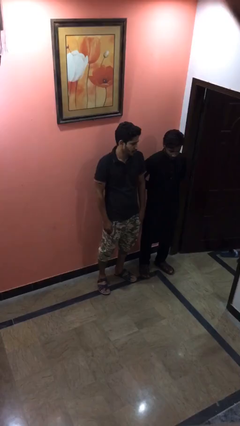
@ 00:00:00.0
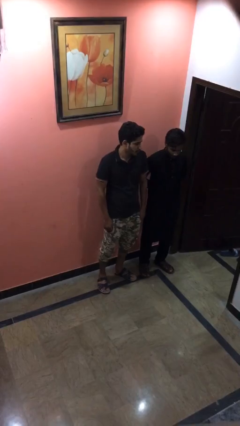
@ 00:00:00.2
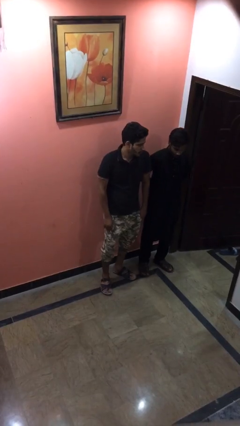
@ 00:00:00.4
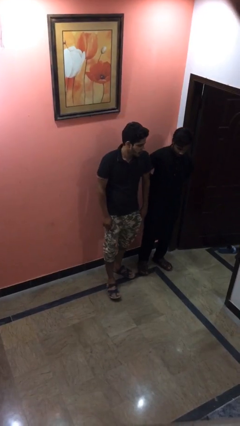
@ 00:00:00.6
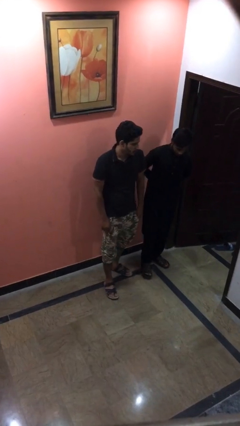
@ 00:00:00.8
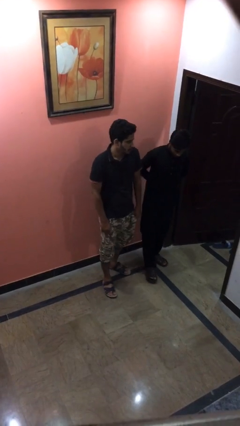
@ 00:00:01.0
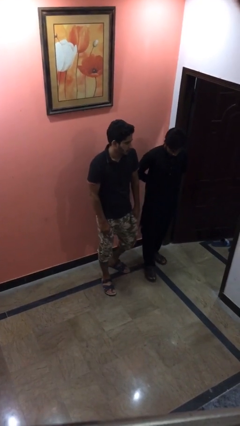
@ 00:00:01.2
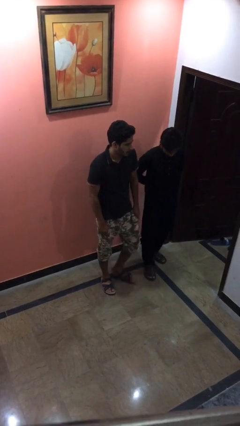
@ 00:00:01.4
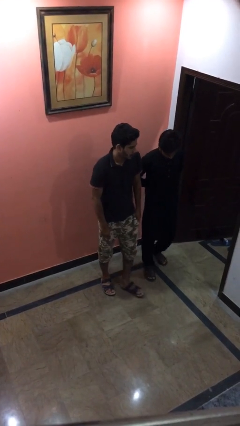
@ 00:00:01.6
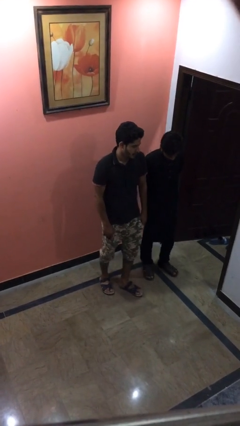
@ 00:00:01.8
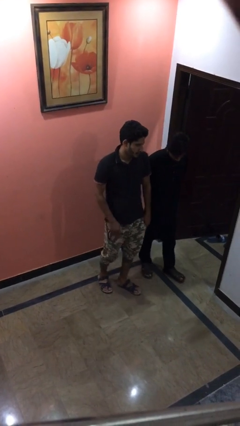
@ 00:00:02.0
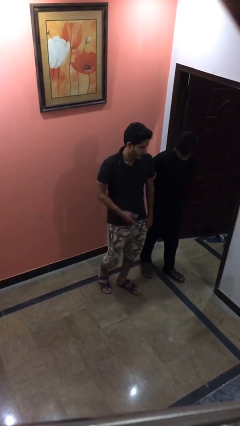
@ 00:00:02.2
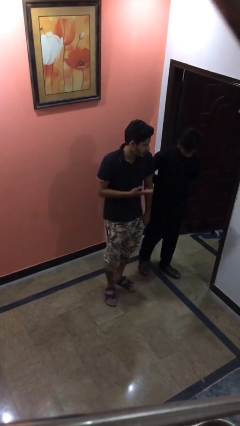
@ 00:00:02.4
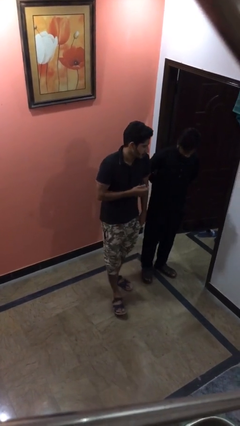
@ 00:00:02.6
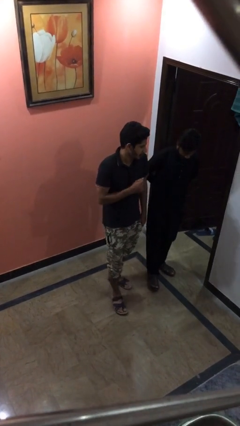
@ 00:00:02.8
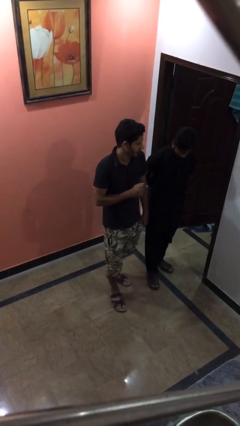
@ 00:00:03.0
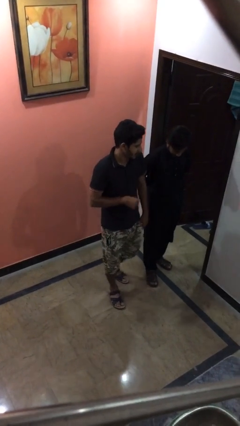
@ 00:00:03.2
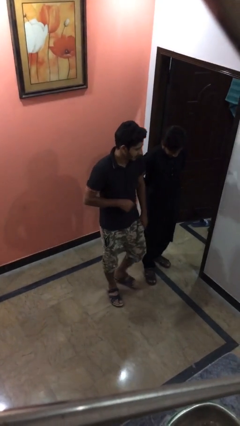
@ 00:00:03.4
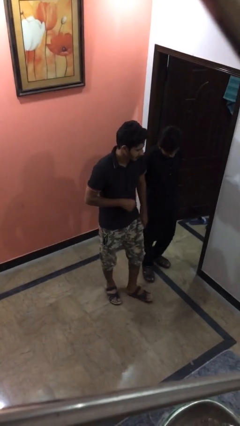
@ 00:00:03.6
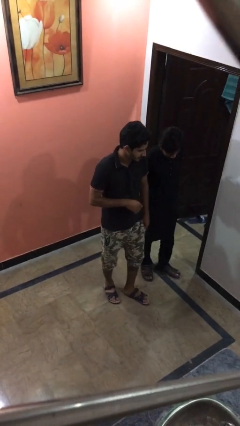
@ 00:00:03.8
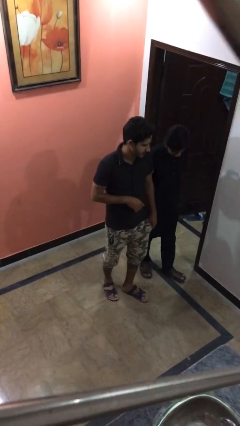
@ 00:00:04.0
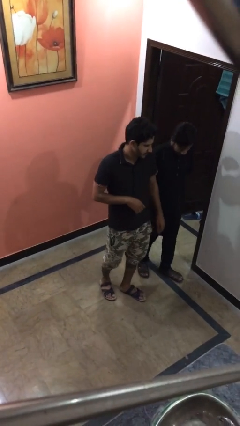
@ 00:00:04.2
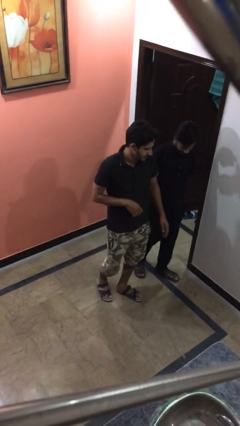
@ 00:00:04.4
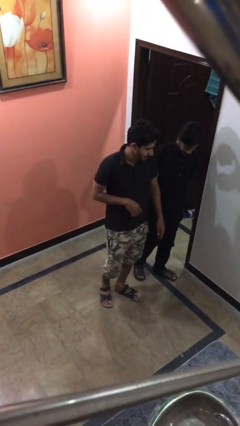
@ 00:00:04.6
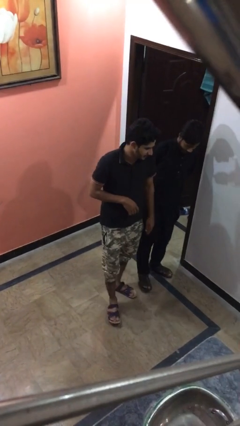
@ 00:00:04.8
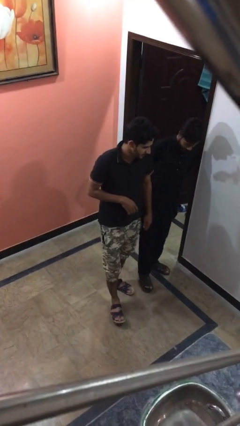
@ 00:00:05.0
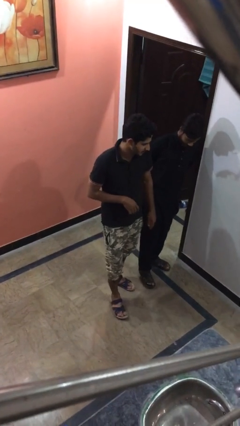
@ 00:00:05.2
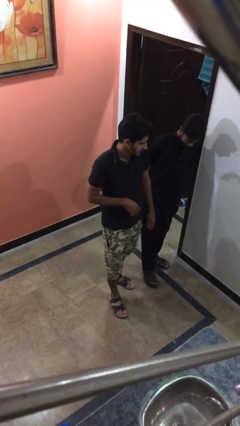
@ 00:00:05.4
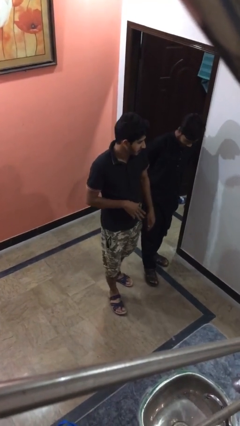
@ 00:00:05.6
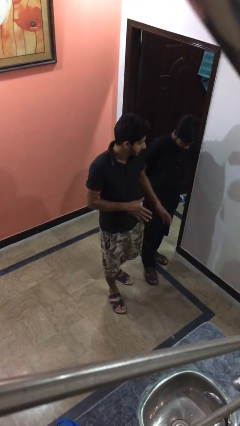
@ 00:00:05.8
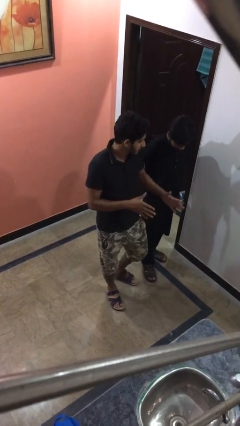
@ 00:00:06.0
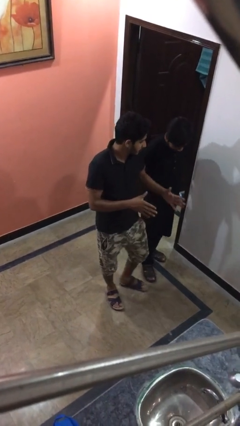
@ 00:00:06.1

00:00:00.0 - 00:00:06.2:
person talks to person

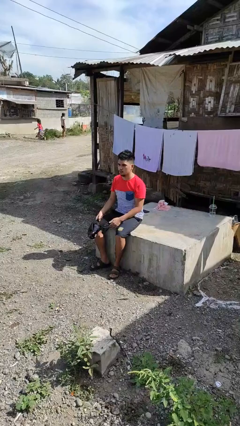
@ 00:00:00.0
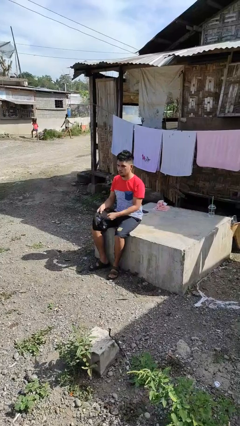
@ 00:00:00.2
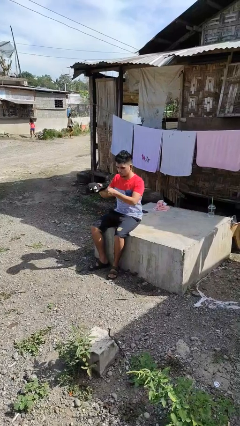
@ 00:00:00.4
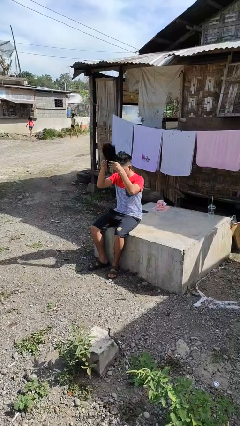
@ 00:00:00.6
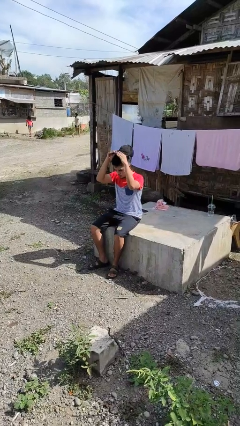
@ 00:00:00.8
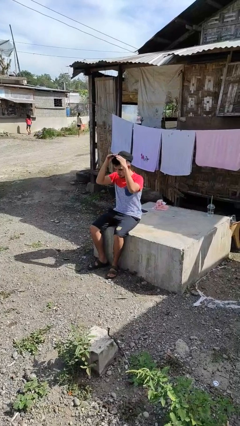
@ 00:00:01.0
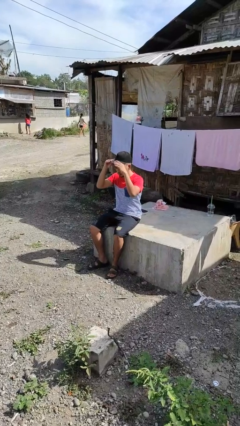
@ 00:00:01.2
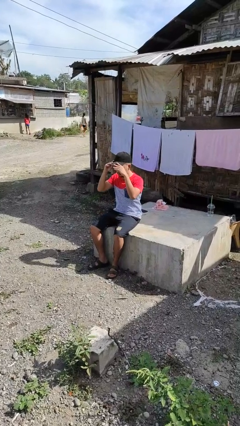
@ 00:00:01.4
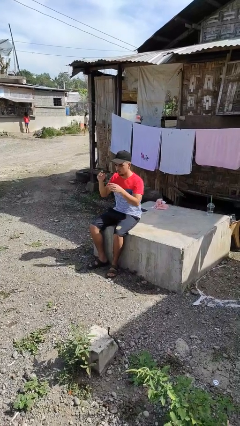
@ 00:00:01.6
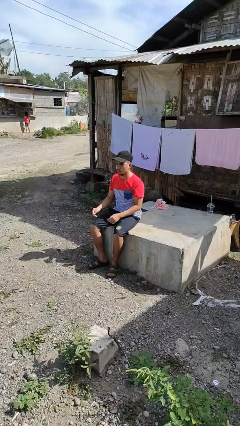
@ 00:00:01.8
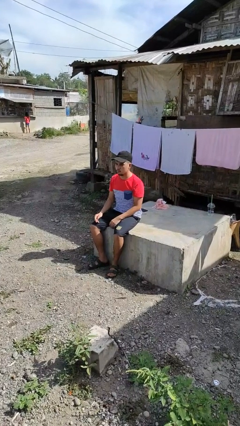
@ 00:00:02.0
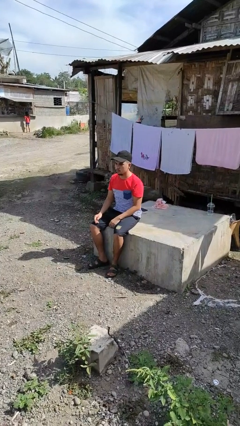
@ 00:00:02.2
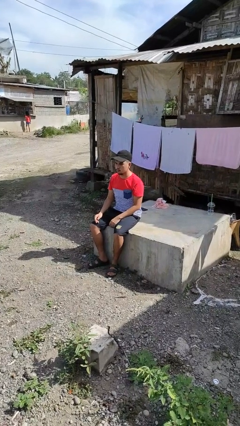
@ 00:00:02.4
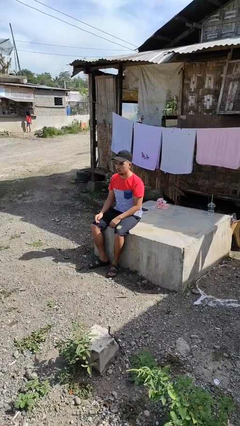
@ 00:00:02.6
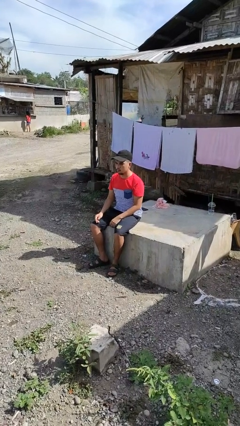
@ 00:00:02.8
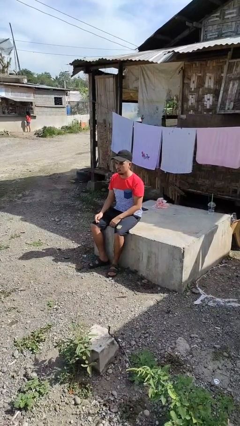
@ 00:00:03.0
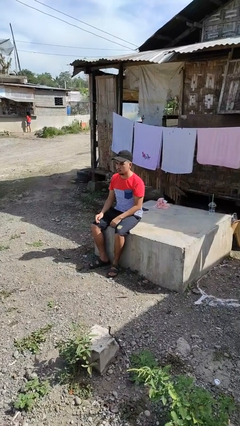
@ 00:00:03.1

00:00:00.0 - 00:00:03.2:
person puts on hat

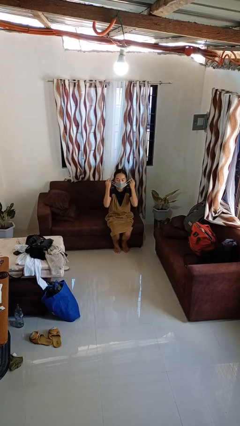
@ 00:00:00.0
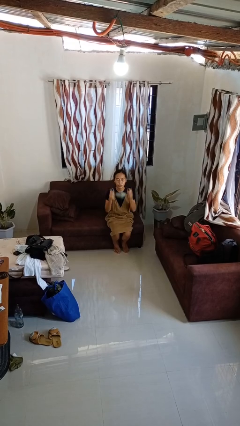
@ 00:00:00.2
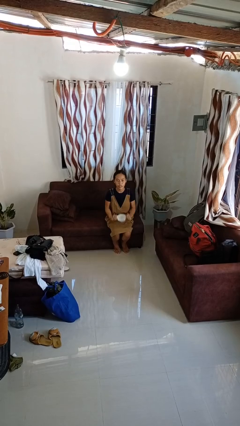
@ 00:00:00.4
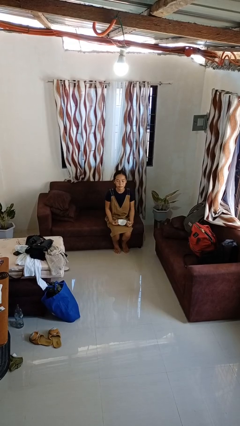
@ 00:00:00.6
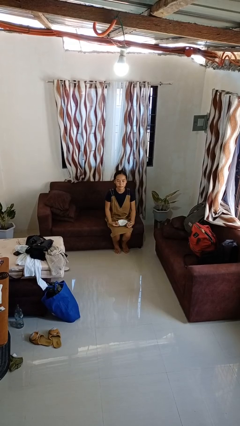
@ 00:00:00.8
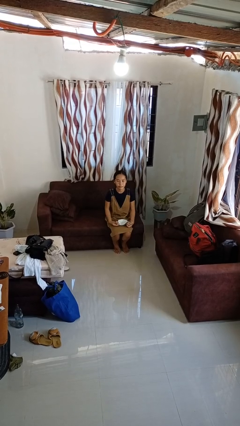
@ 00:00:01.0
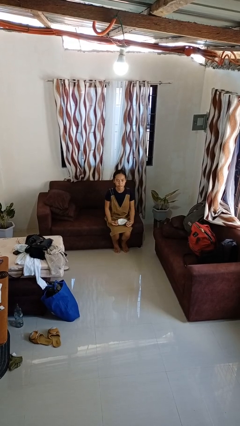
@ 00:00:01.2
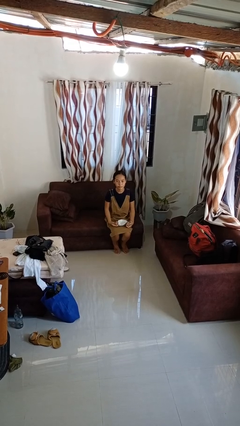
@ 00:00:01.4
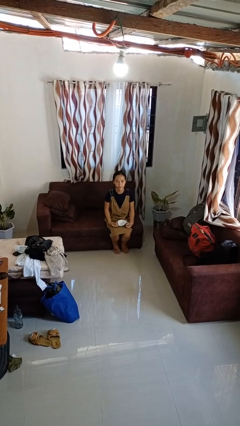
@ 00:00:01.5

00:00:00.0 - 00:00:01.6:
person takes off facemask

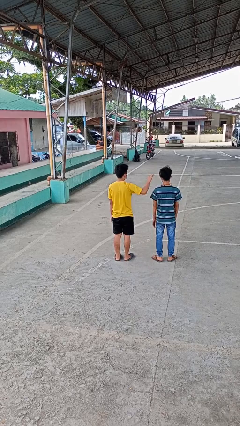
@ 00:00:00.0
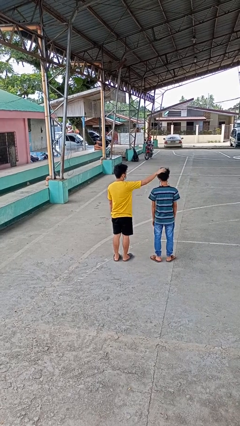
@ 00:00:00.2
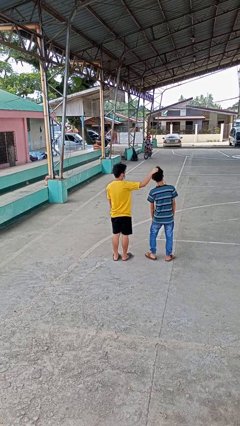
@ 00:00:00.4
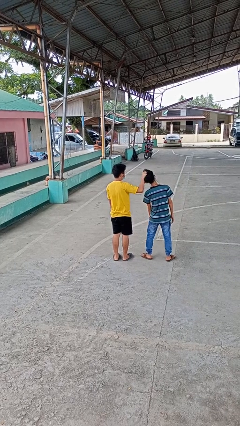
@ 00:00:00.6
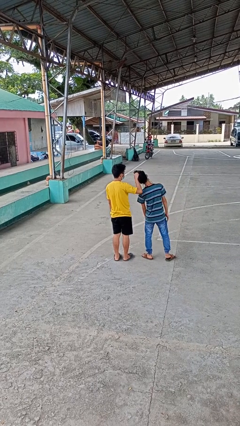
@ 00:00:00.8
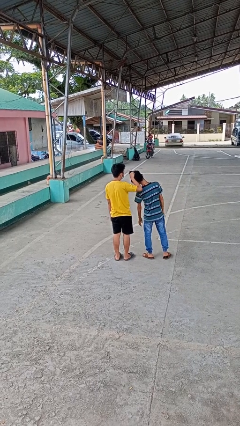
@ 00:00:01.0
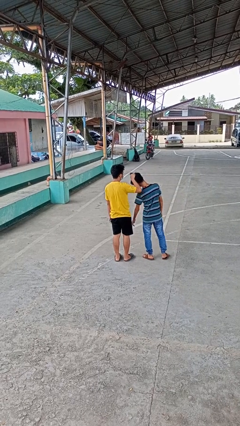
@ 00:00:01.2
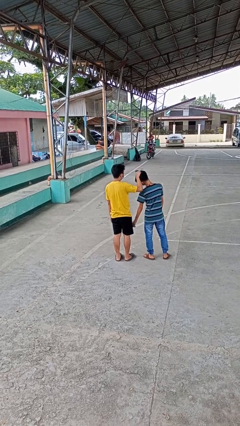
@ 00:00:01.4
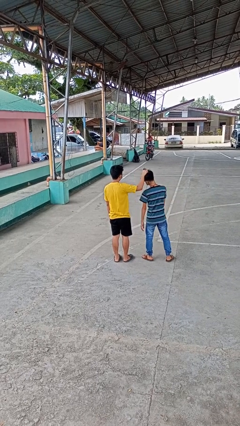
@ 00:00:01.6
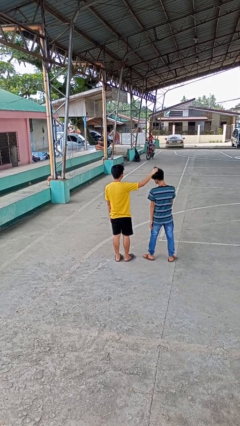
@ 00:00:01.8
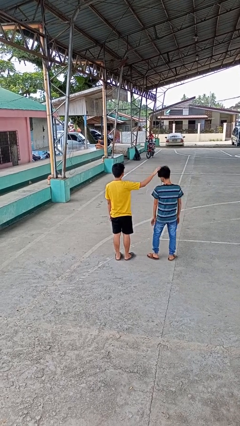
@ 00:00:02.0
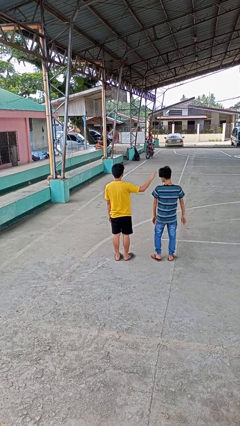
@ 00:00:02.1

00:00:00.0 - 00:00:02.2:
person grabs person by hair

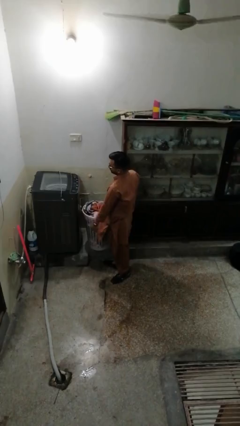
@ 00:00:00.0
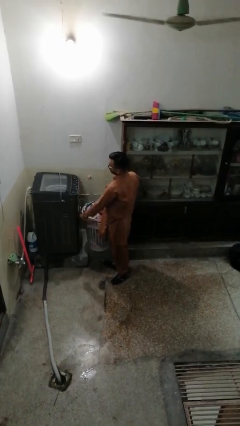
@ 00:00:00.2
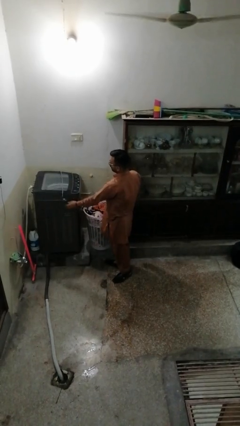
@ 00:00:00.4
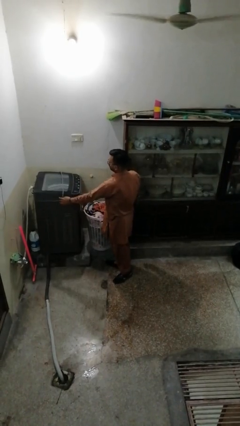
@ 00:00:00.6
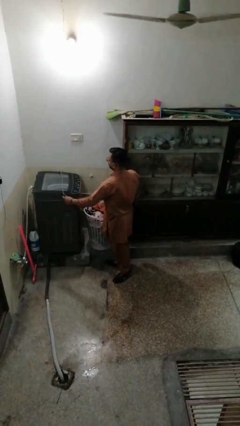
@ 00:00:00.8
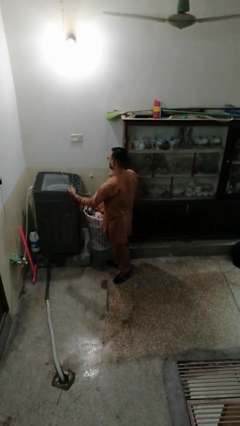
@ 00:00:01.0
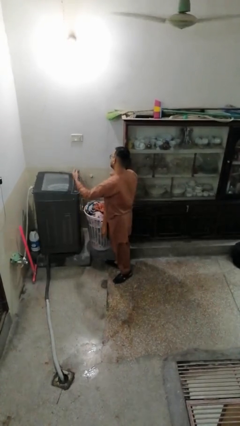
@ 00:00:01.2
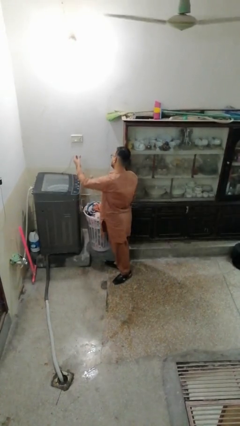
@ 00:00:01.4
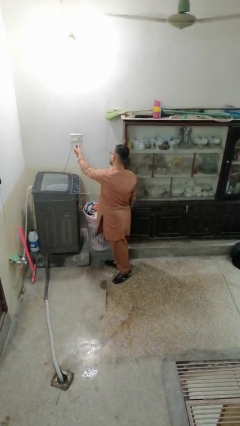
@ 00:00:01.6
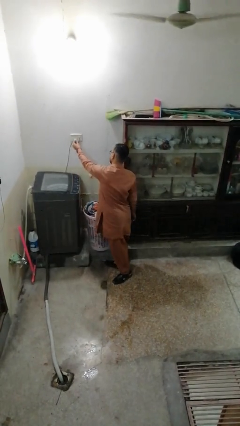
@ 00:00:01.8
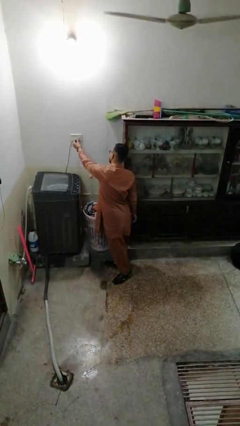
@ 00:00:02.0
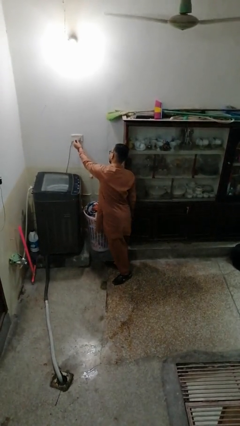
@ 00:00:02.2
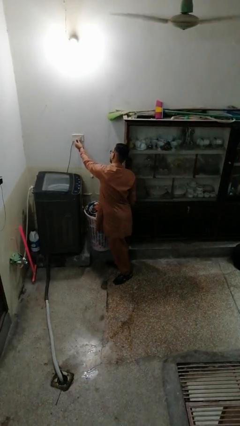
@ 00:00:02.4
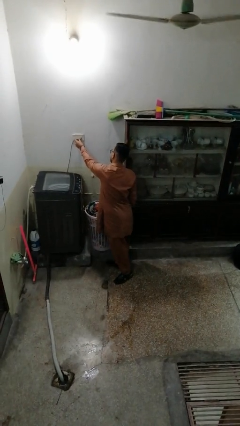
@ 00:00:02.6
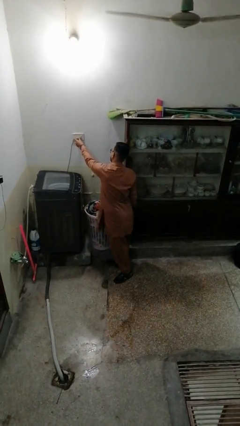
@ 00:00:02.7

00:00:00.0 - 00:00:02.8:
person plugs into electrical socket

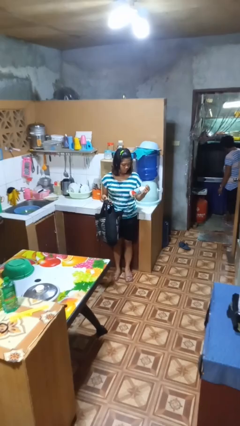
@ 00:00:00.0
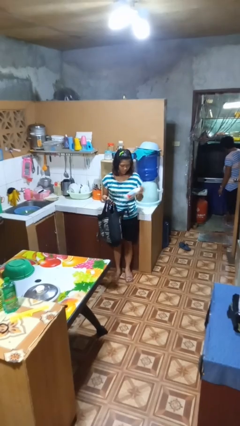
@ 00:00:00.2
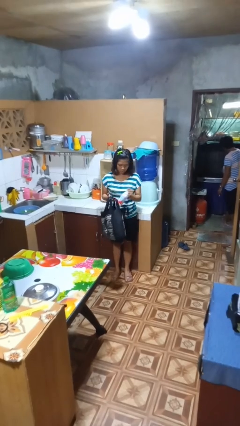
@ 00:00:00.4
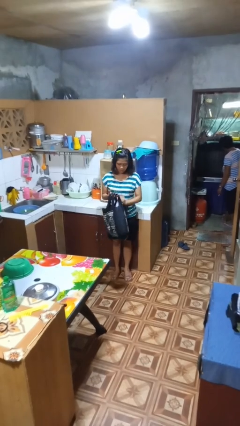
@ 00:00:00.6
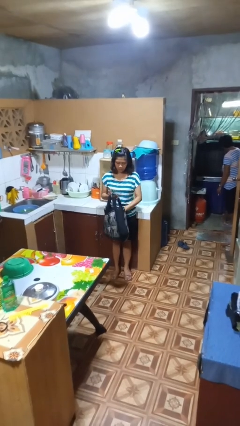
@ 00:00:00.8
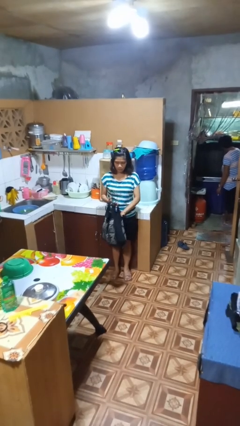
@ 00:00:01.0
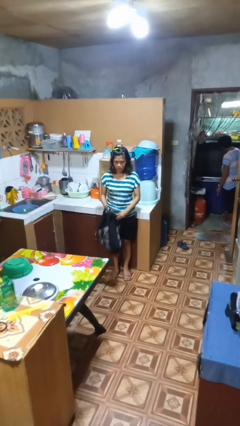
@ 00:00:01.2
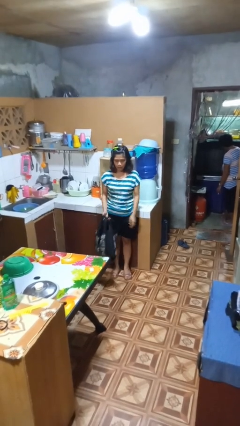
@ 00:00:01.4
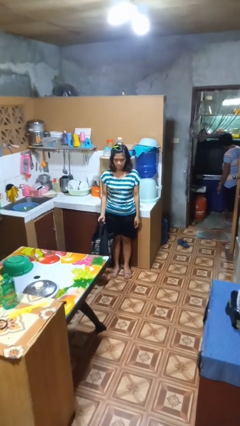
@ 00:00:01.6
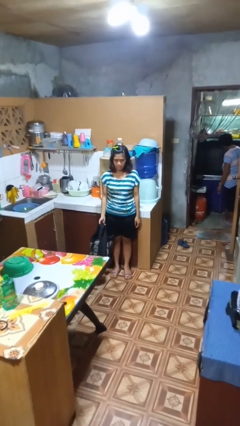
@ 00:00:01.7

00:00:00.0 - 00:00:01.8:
person puts object into bag
